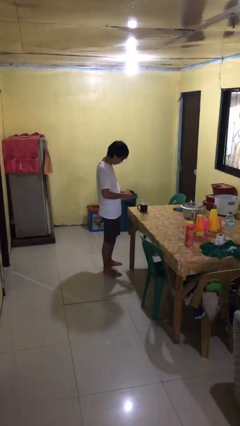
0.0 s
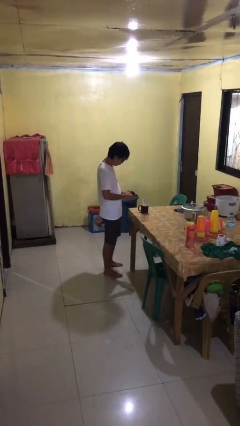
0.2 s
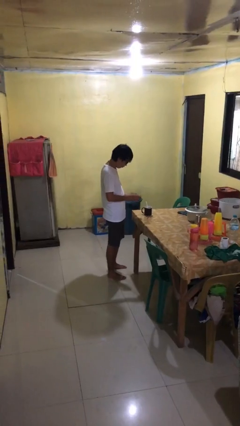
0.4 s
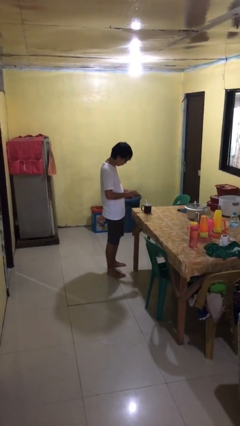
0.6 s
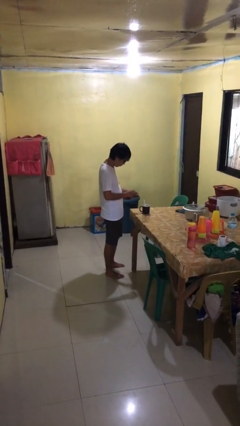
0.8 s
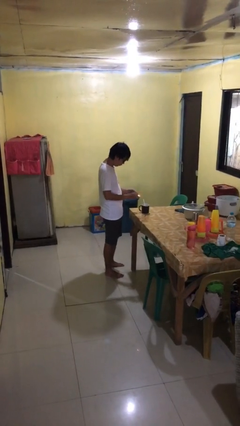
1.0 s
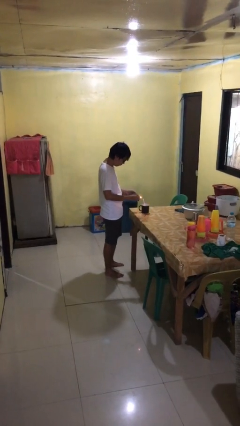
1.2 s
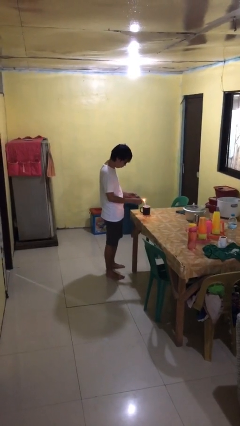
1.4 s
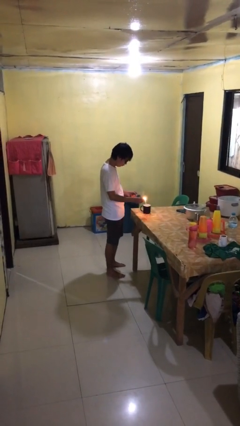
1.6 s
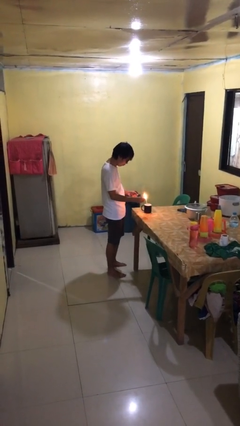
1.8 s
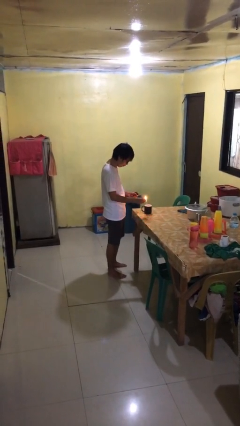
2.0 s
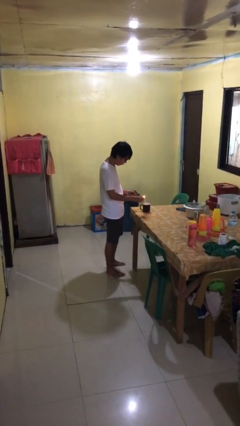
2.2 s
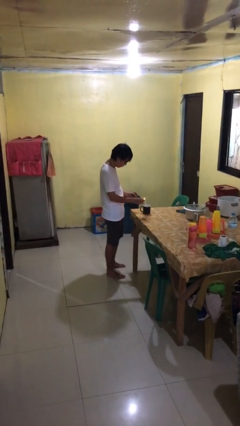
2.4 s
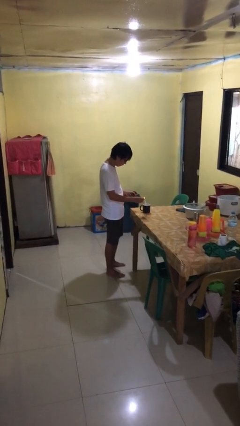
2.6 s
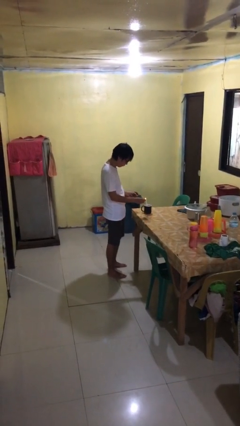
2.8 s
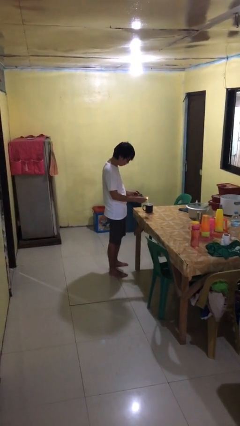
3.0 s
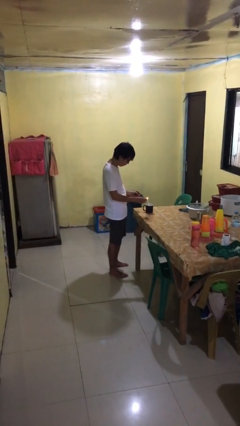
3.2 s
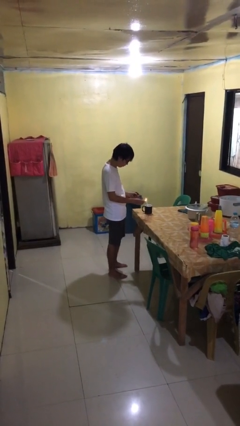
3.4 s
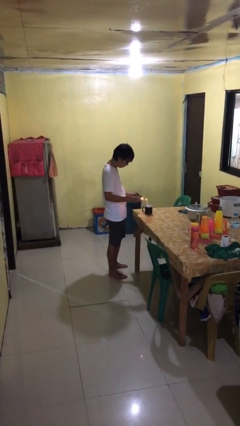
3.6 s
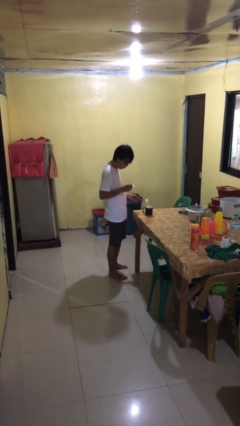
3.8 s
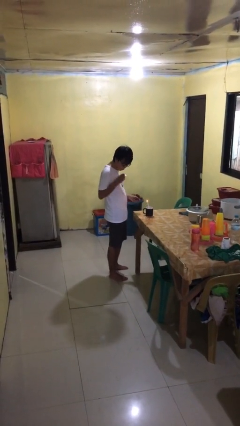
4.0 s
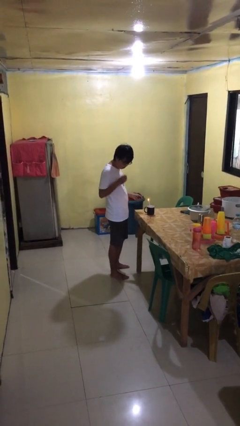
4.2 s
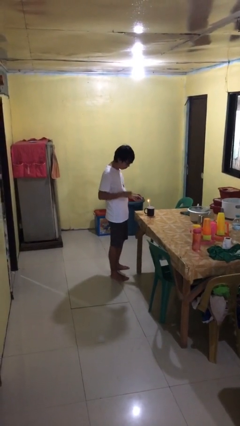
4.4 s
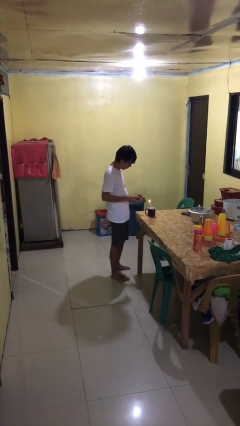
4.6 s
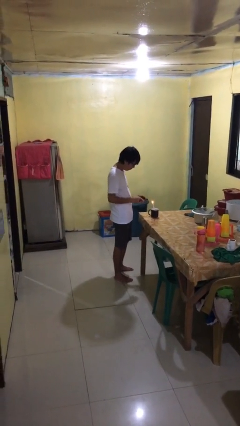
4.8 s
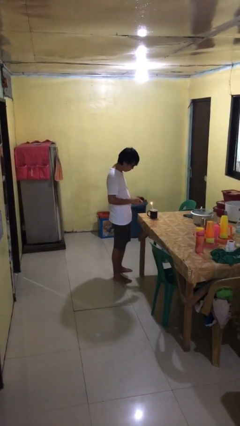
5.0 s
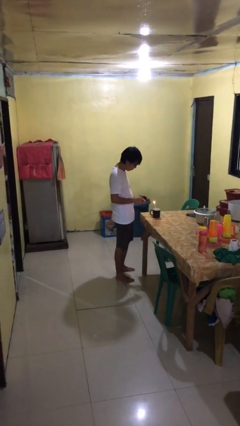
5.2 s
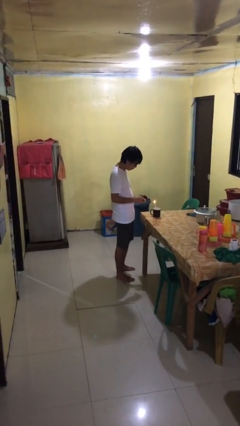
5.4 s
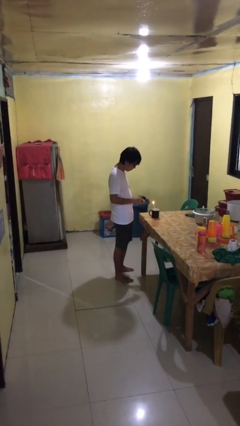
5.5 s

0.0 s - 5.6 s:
person lights candle

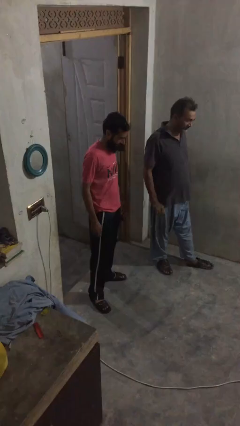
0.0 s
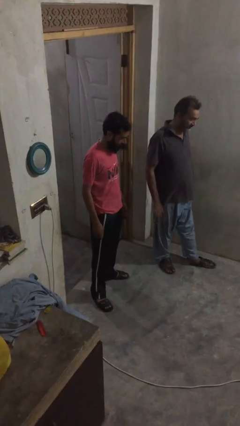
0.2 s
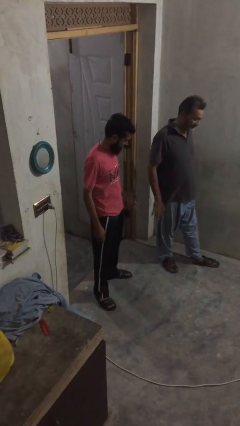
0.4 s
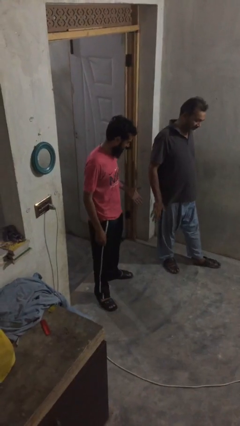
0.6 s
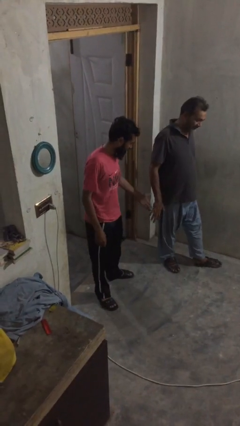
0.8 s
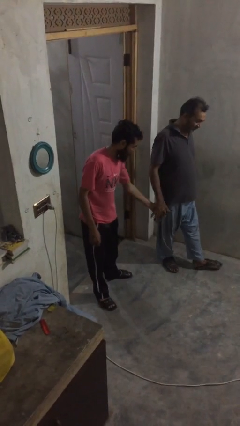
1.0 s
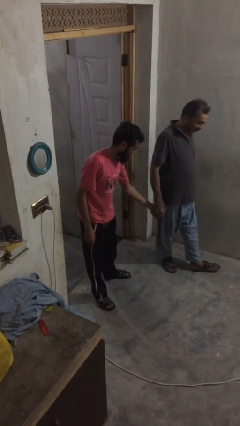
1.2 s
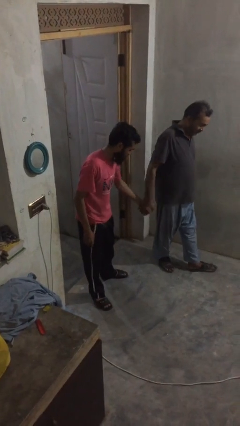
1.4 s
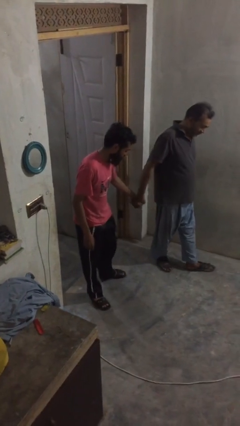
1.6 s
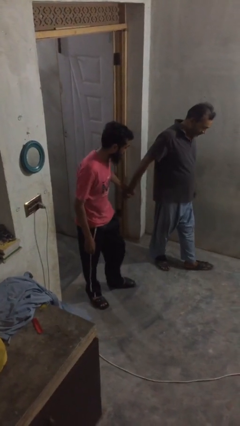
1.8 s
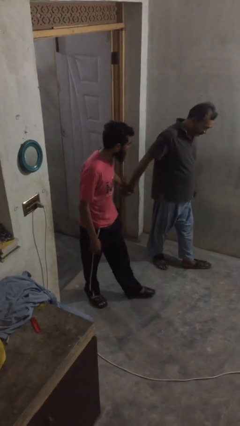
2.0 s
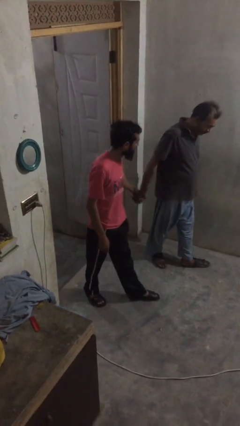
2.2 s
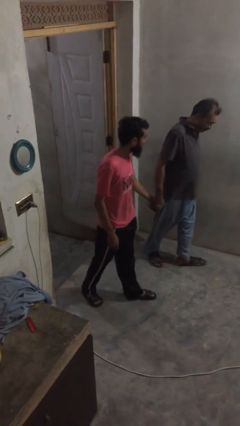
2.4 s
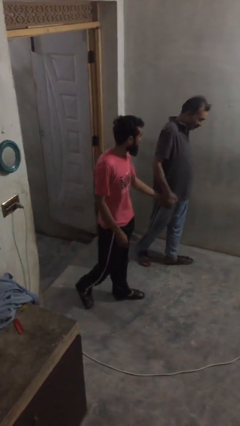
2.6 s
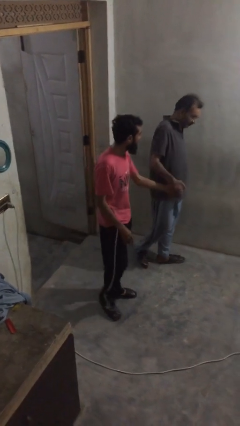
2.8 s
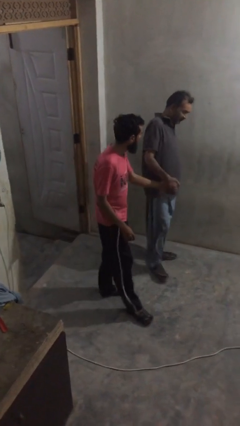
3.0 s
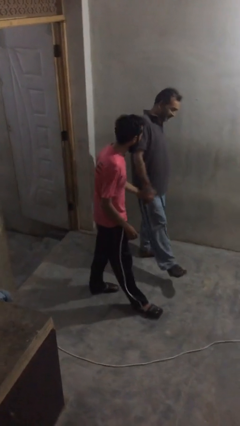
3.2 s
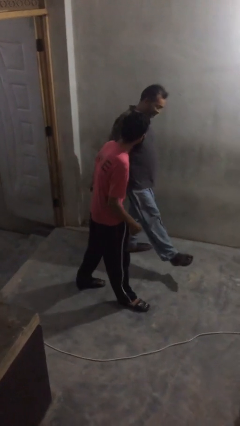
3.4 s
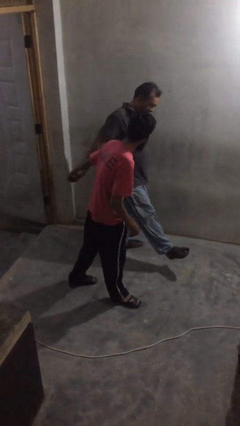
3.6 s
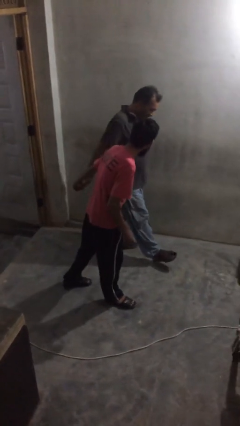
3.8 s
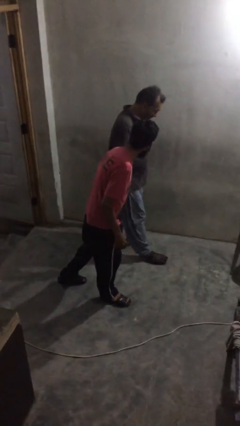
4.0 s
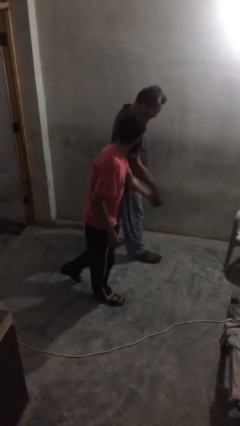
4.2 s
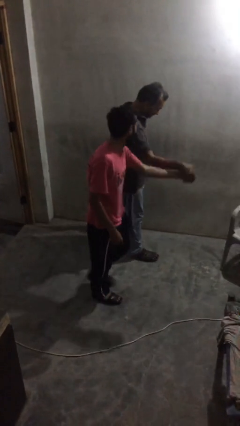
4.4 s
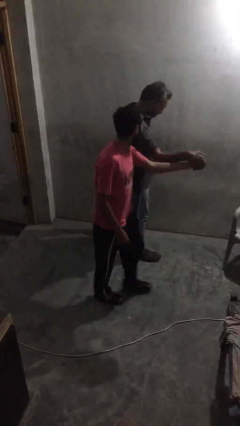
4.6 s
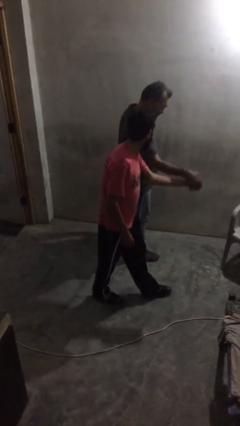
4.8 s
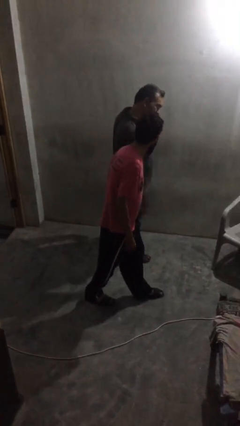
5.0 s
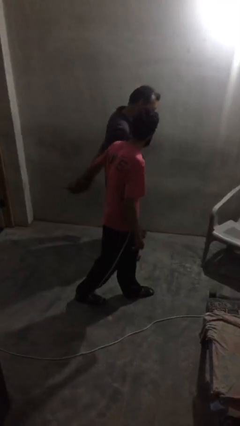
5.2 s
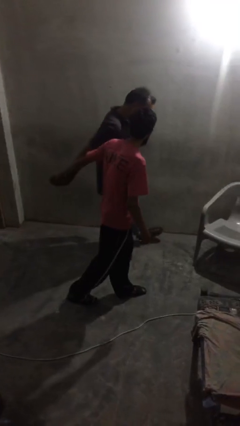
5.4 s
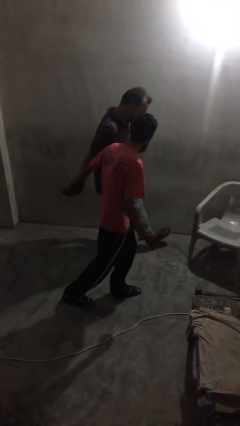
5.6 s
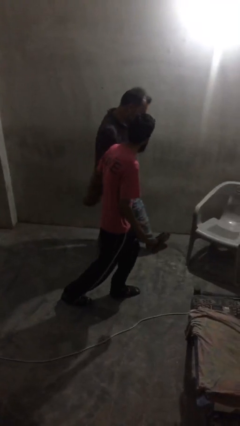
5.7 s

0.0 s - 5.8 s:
person holds hand

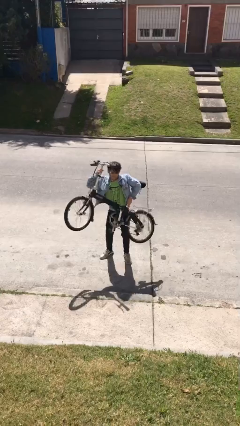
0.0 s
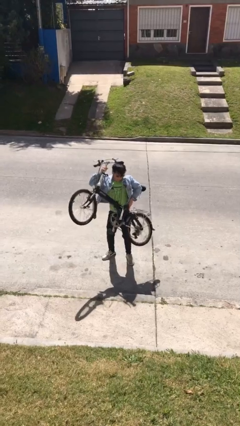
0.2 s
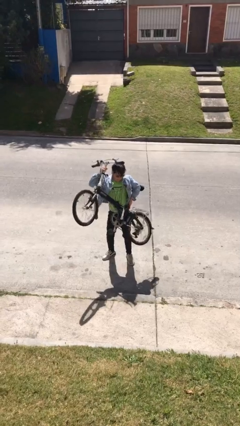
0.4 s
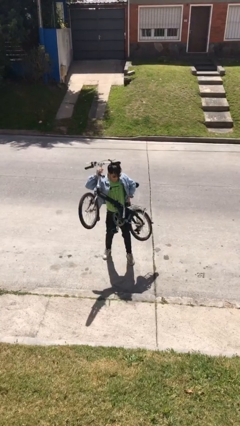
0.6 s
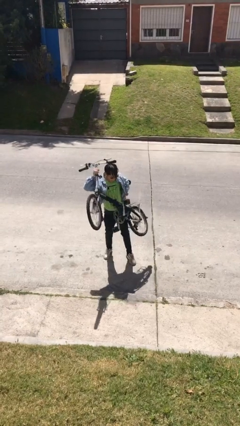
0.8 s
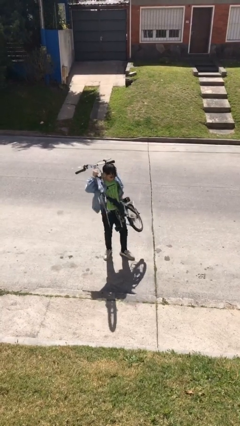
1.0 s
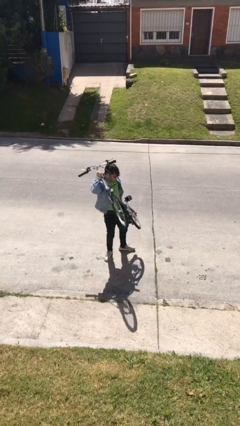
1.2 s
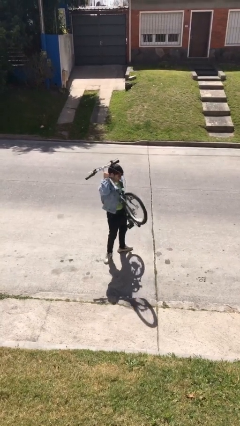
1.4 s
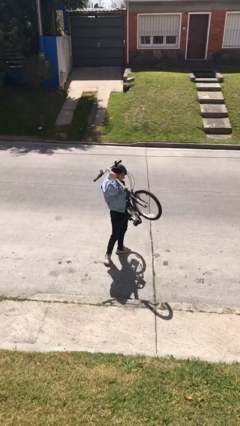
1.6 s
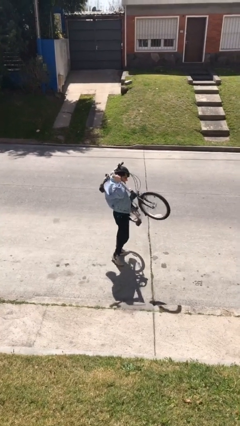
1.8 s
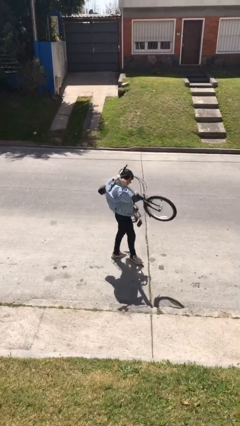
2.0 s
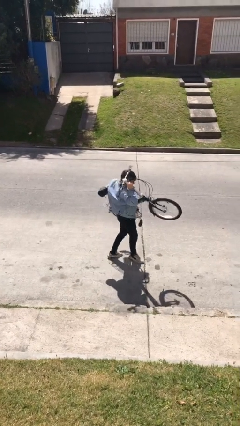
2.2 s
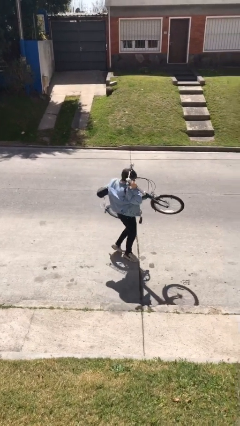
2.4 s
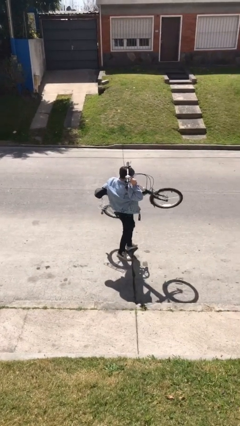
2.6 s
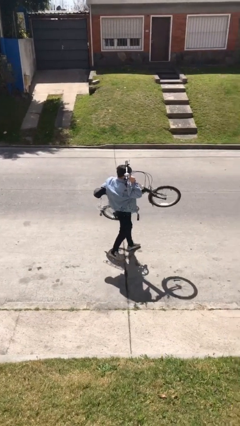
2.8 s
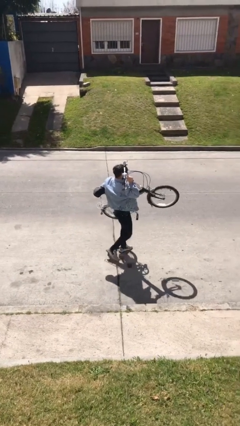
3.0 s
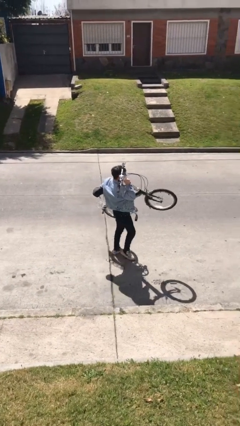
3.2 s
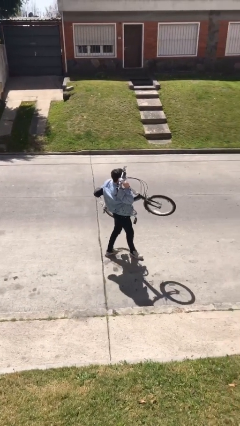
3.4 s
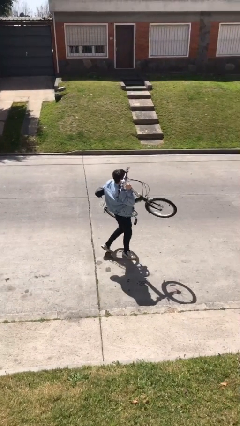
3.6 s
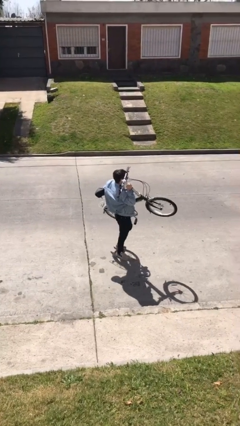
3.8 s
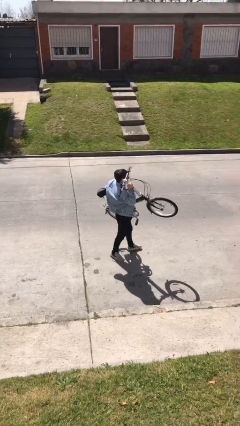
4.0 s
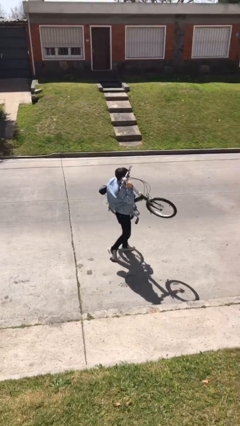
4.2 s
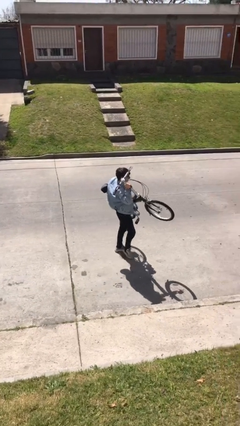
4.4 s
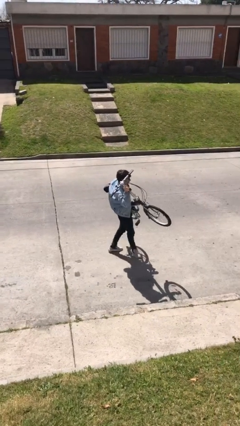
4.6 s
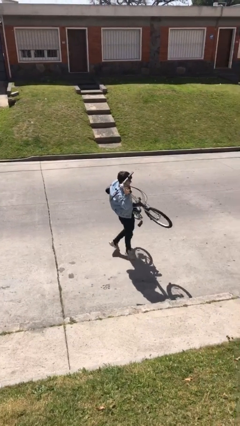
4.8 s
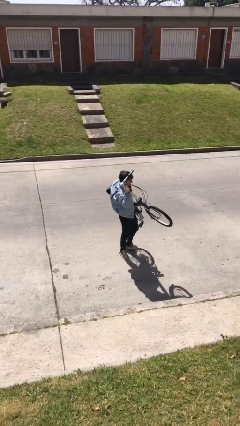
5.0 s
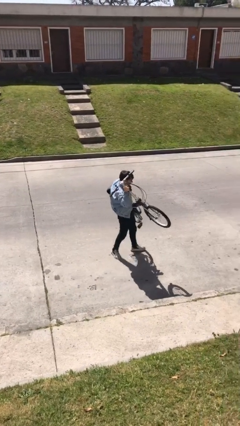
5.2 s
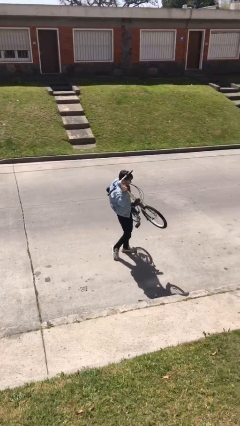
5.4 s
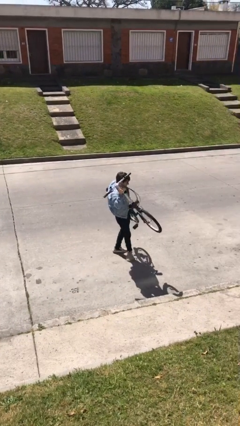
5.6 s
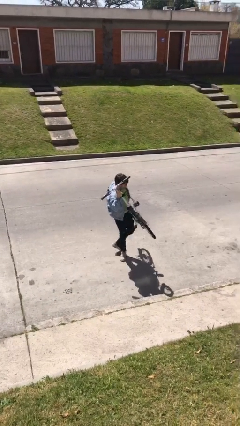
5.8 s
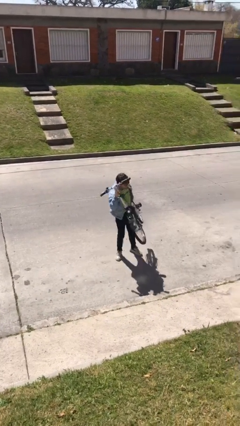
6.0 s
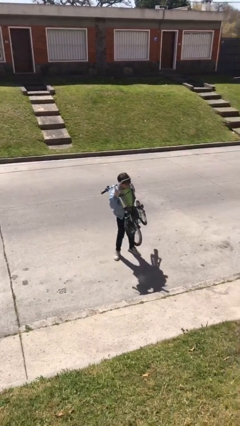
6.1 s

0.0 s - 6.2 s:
person carries heavy object

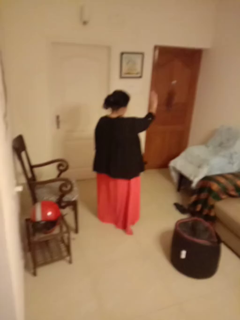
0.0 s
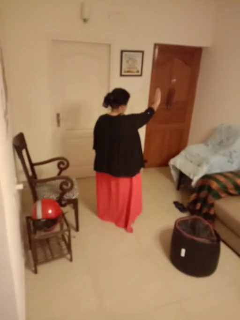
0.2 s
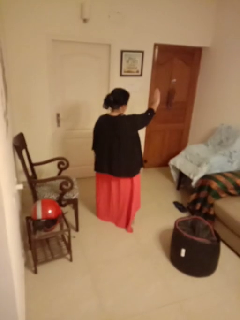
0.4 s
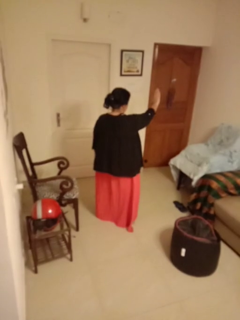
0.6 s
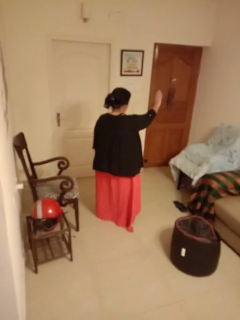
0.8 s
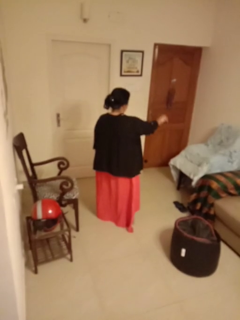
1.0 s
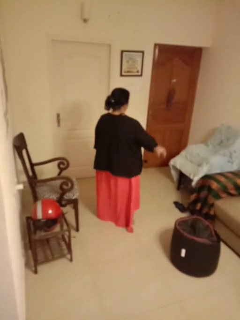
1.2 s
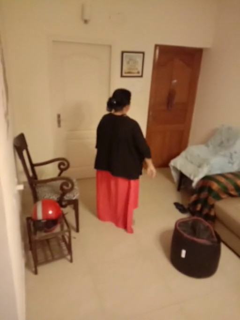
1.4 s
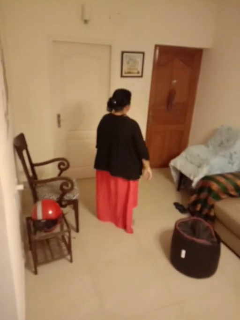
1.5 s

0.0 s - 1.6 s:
person gestures stop
